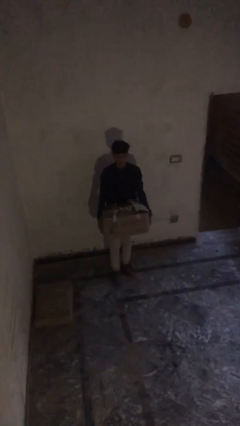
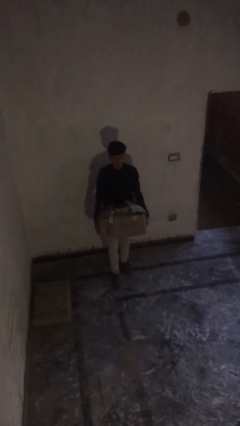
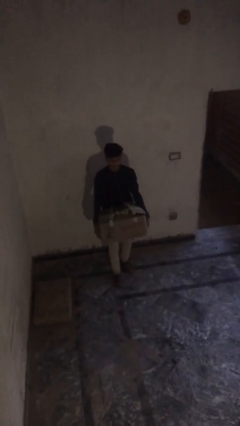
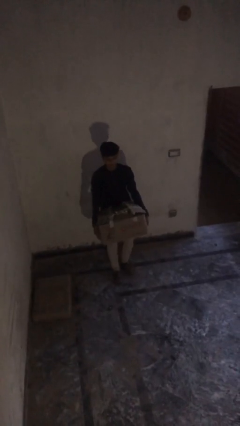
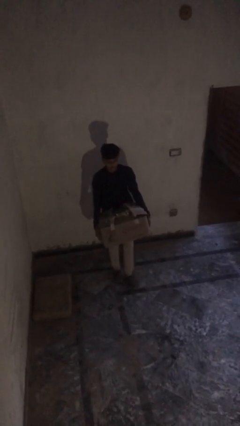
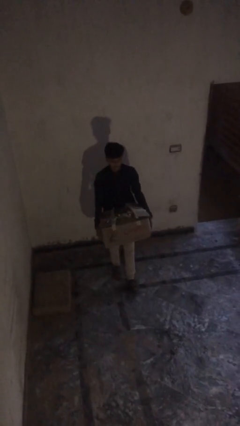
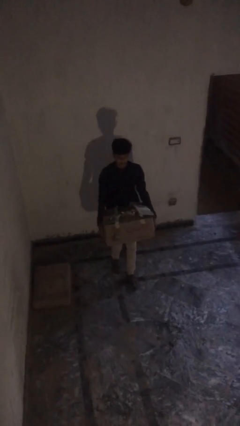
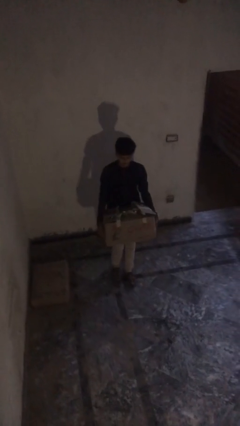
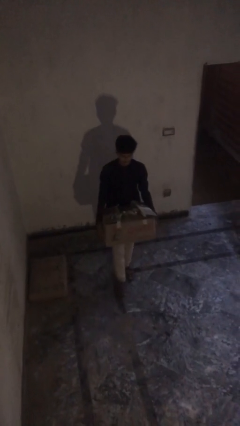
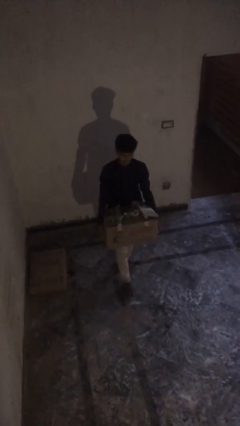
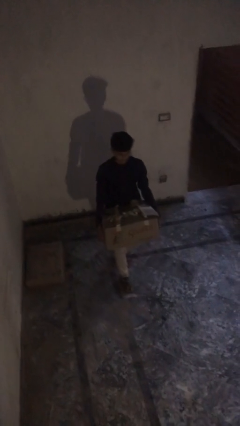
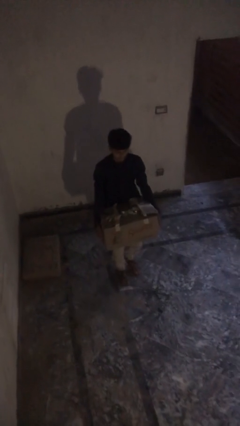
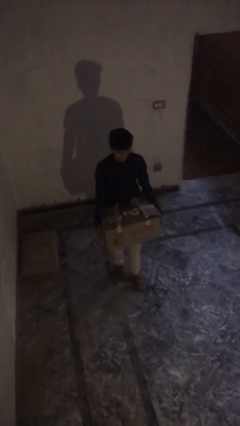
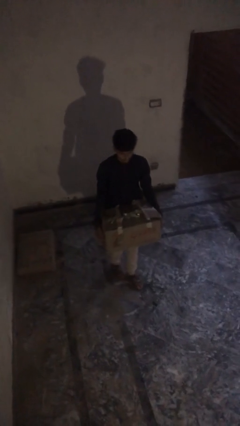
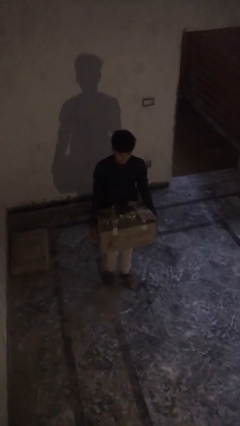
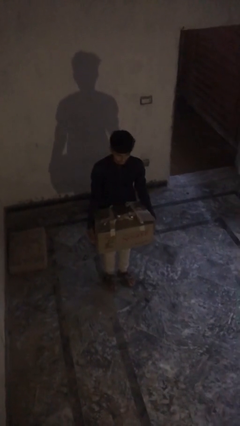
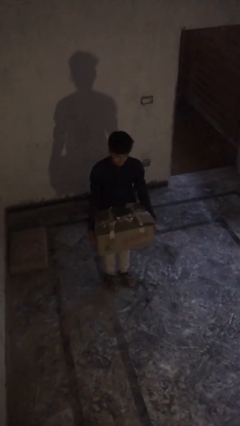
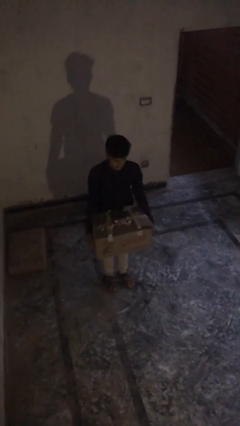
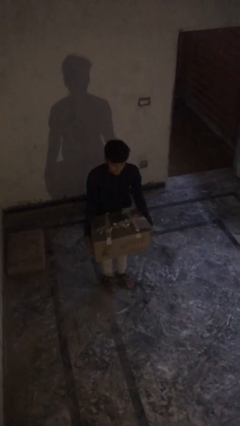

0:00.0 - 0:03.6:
person carries heavy object

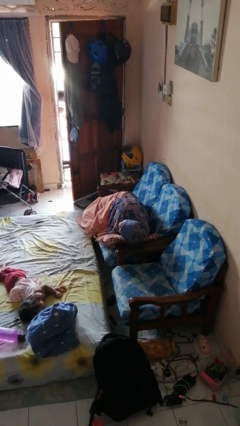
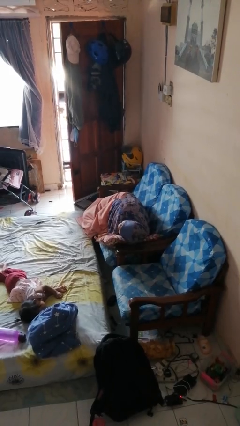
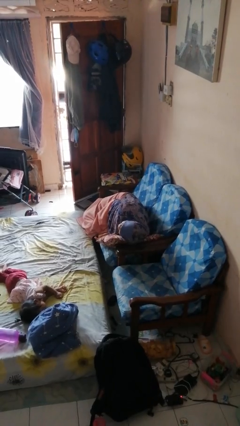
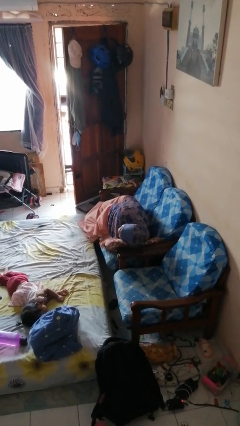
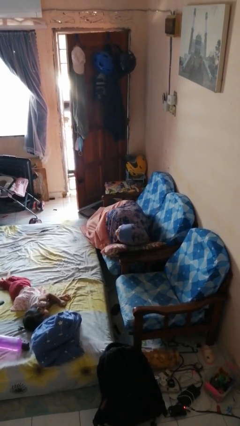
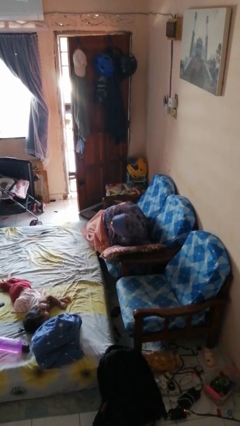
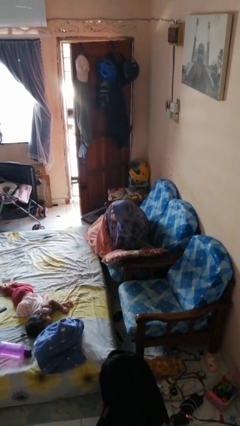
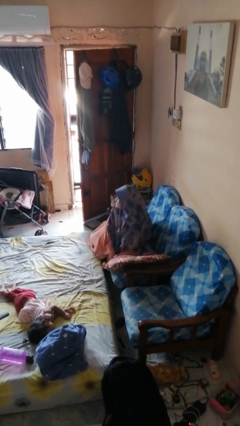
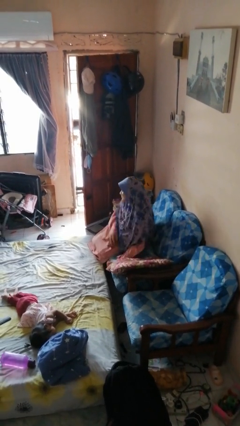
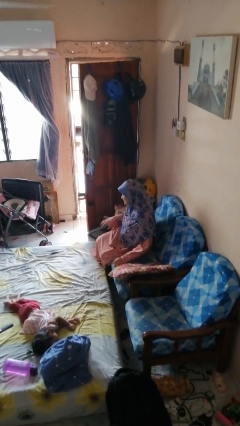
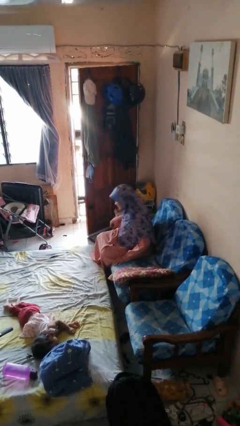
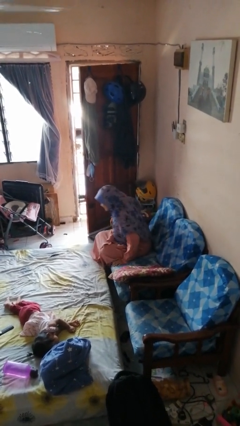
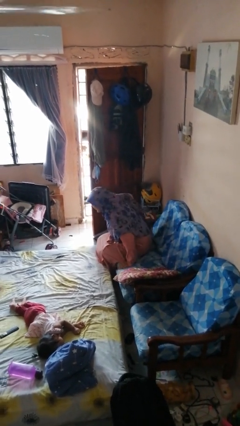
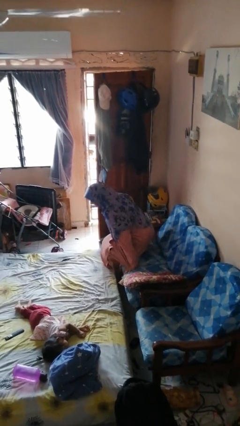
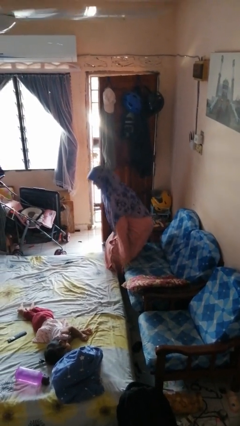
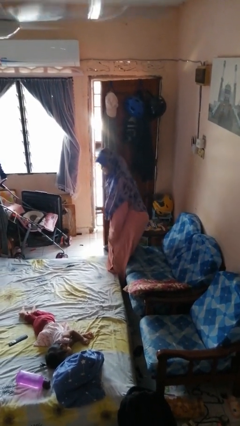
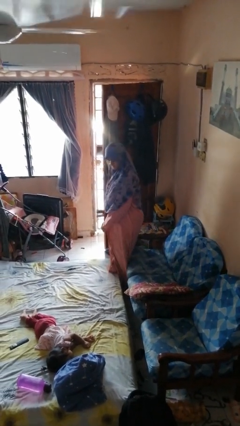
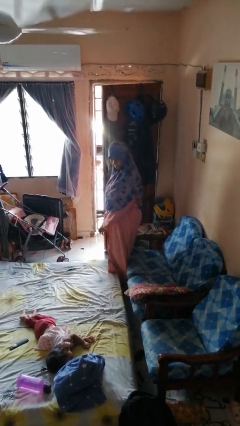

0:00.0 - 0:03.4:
person stands up

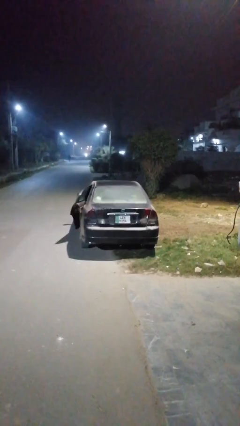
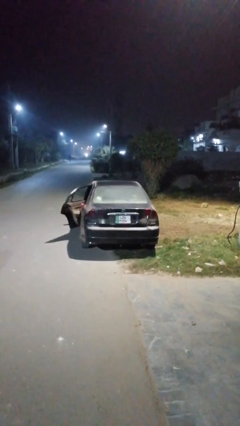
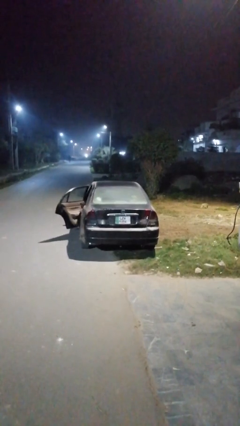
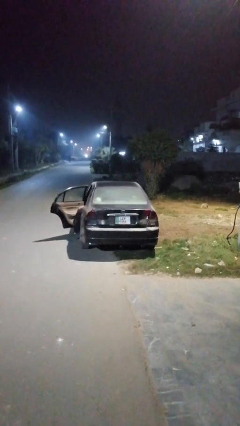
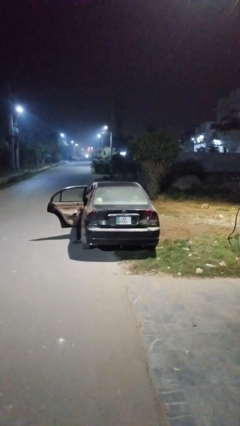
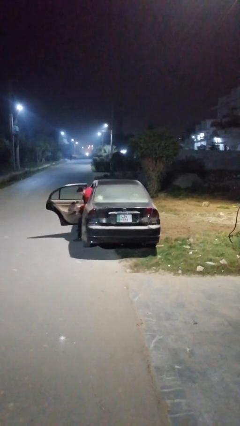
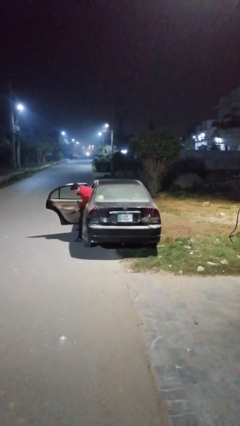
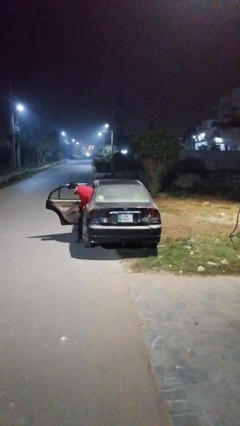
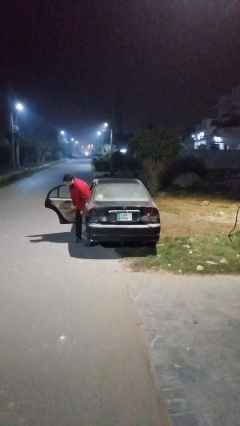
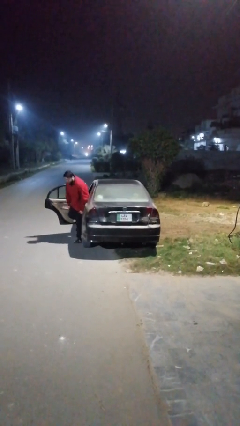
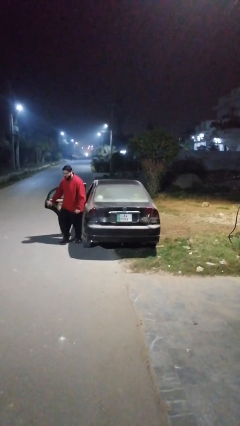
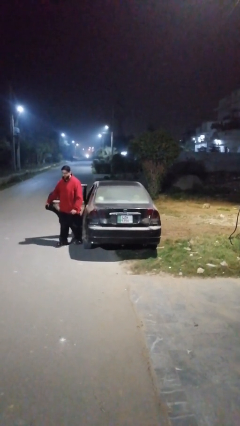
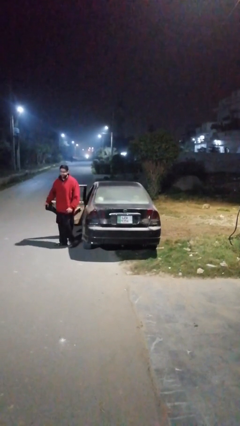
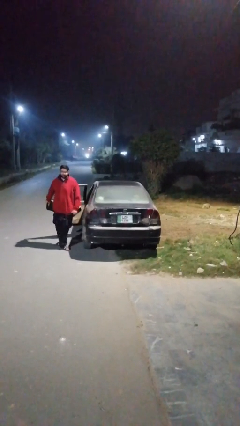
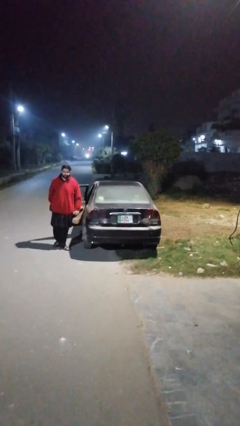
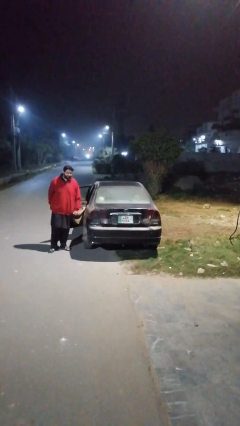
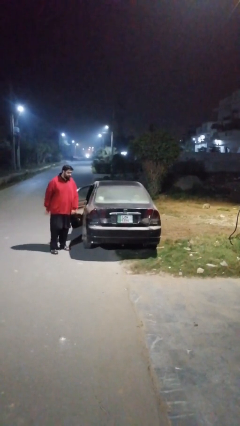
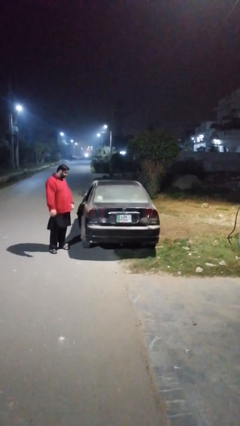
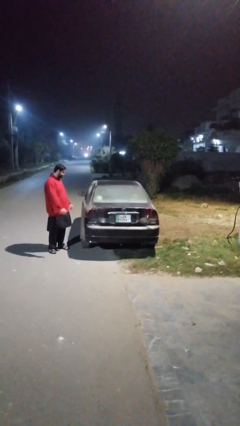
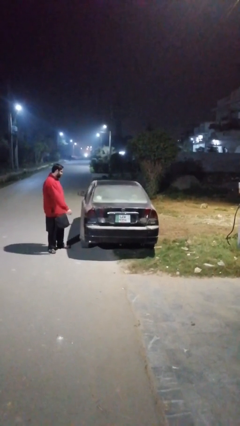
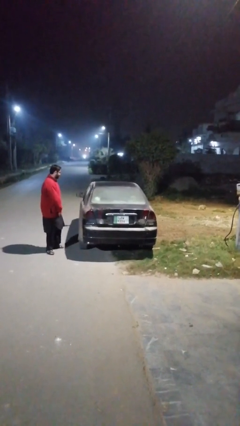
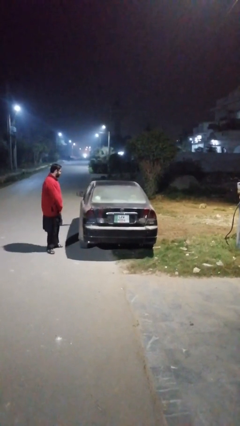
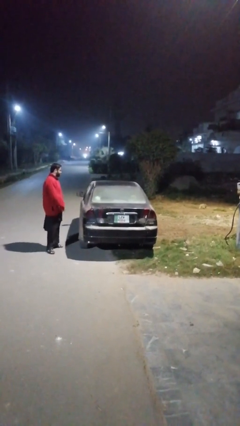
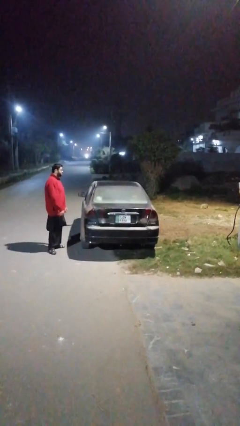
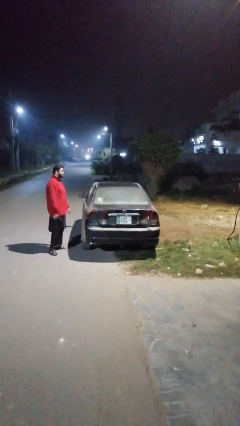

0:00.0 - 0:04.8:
car drops off person

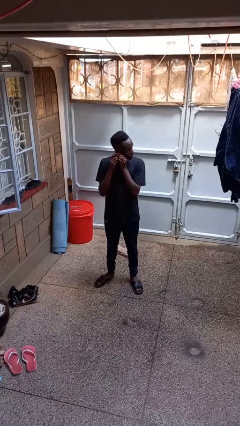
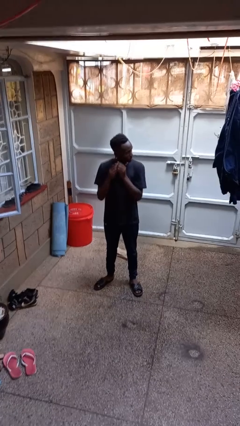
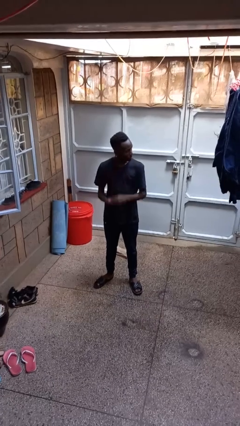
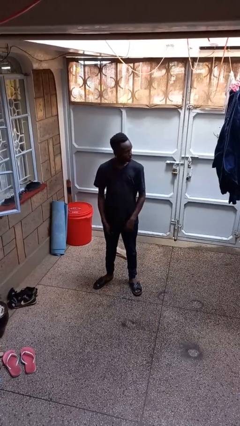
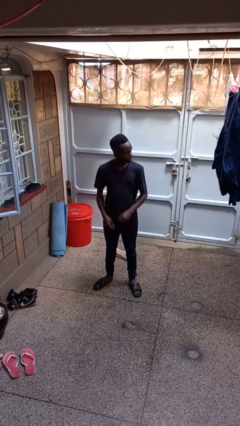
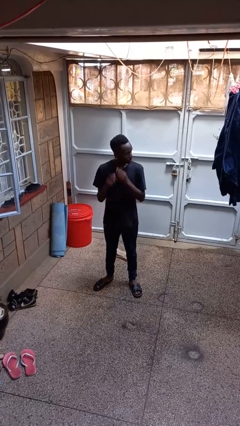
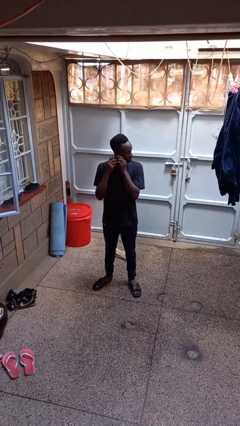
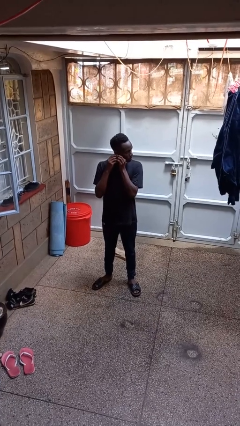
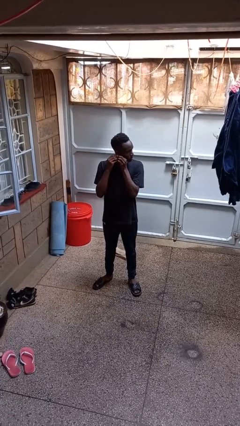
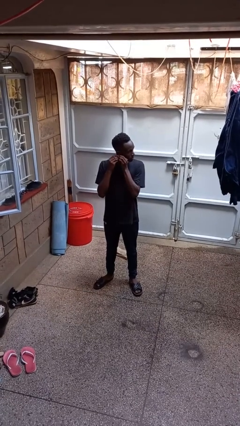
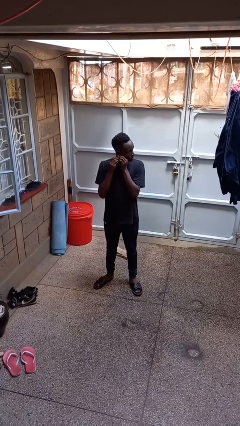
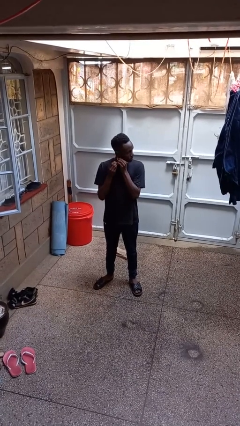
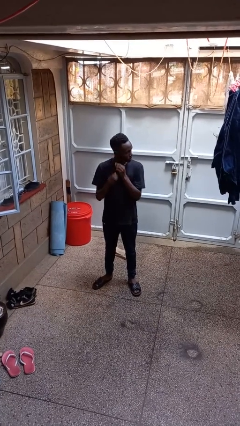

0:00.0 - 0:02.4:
person takes off earrings

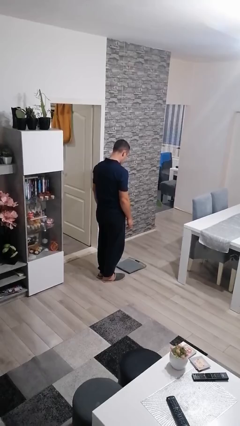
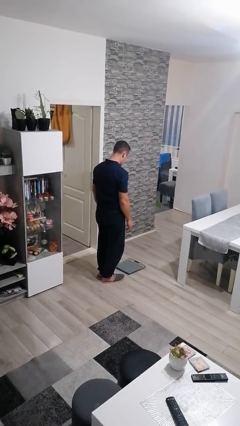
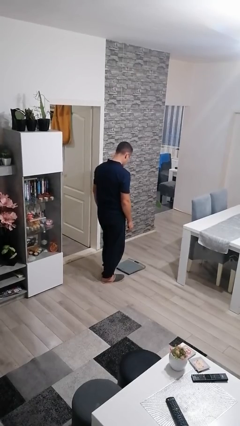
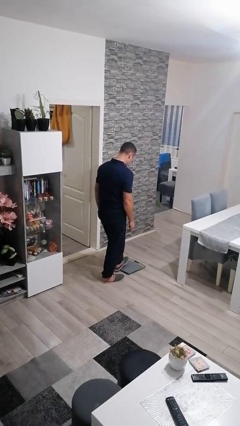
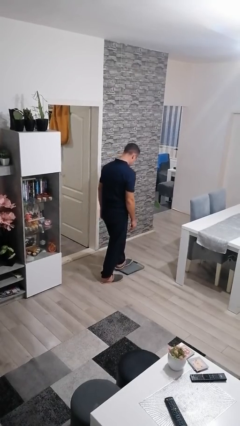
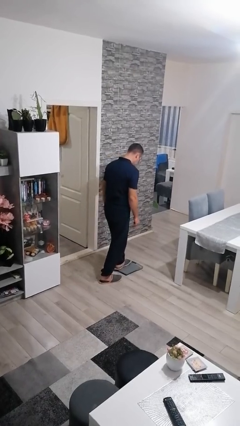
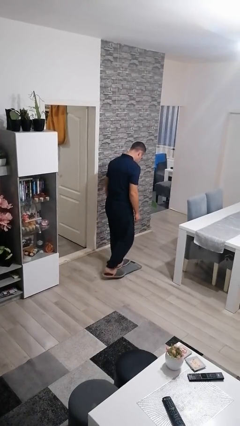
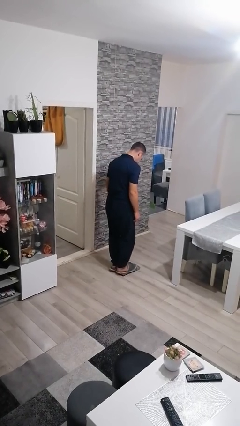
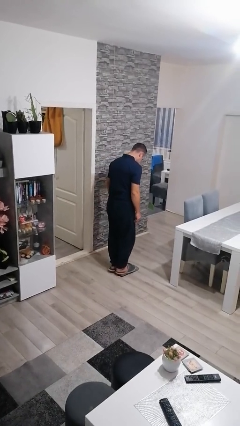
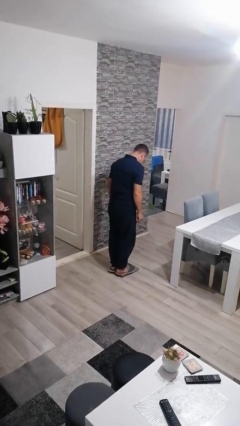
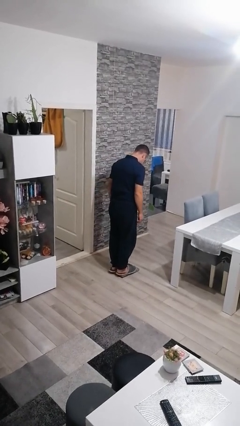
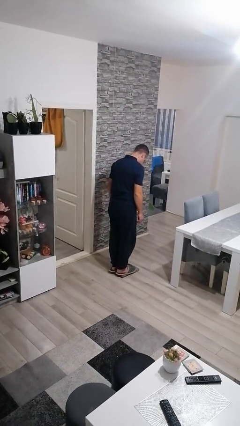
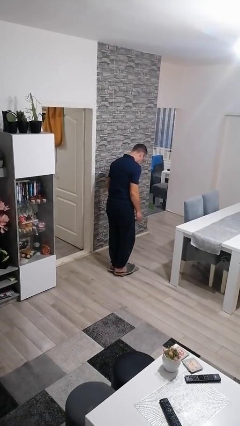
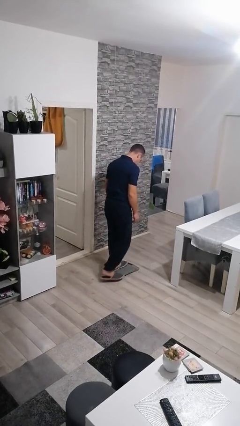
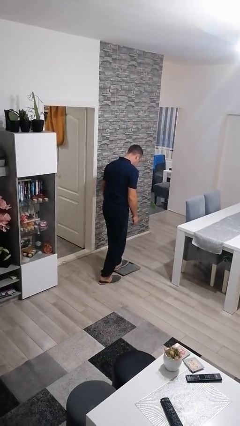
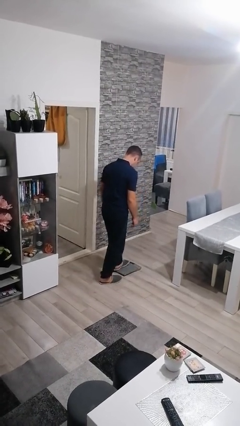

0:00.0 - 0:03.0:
person uses bodyweight scale
